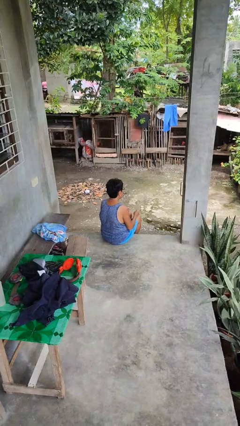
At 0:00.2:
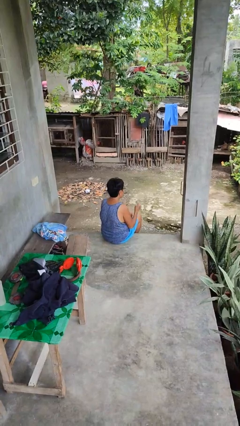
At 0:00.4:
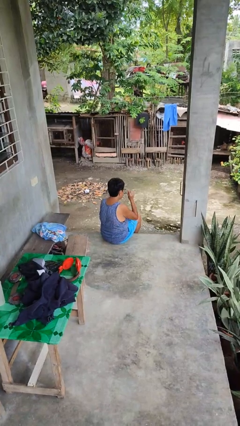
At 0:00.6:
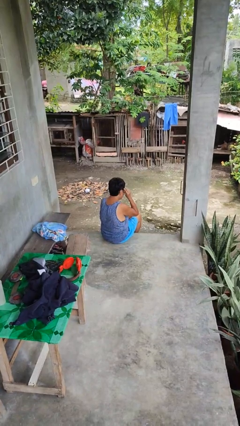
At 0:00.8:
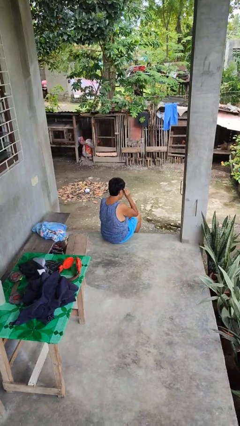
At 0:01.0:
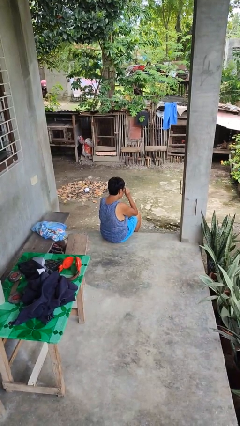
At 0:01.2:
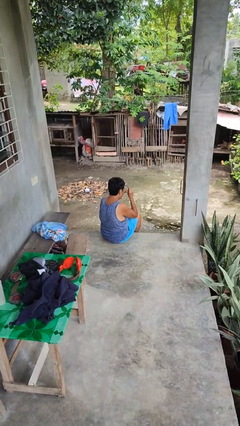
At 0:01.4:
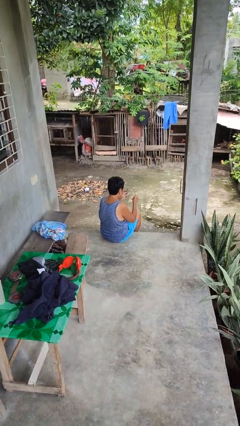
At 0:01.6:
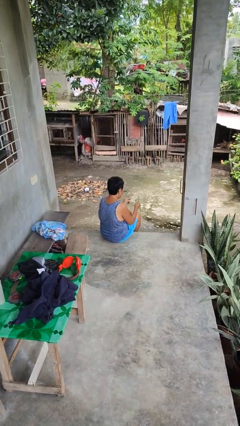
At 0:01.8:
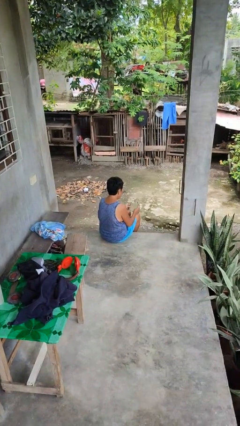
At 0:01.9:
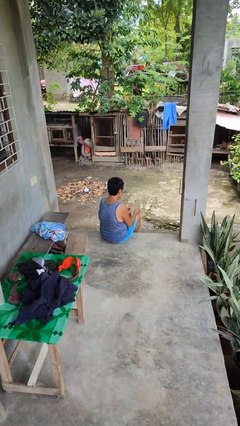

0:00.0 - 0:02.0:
person takes off glasses

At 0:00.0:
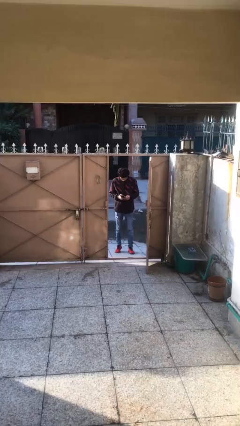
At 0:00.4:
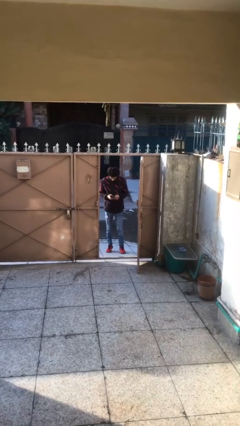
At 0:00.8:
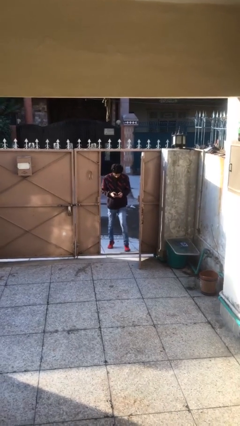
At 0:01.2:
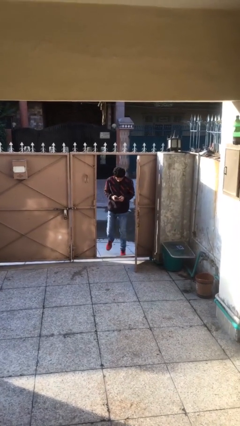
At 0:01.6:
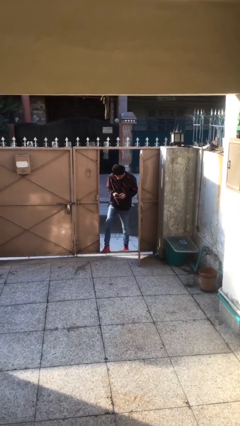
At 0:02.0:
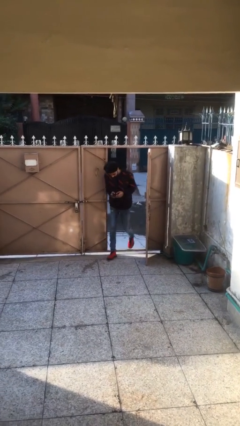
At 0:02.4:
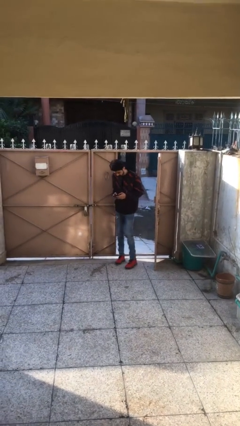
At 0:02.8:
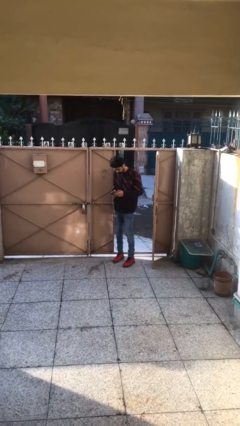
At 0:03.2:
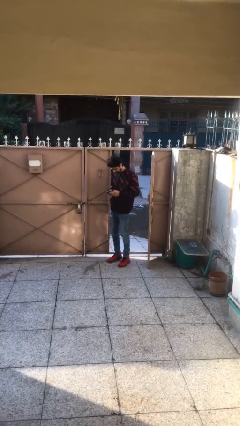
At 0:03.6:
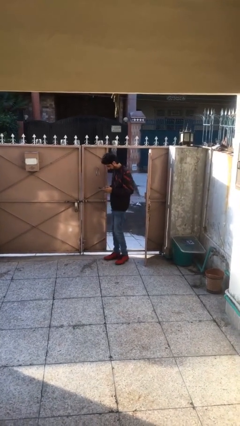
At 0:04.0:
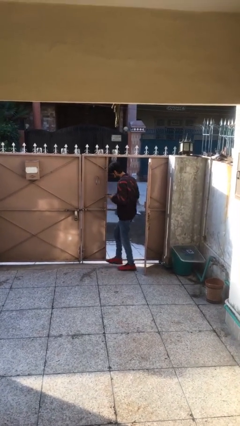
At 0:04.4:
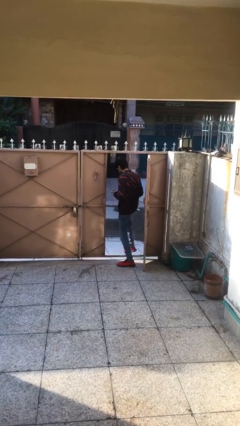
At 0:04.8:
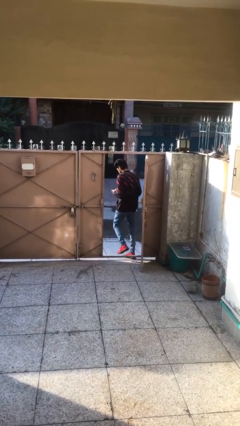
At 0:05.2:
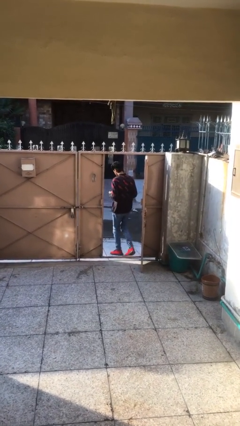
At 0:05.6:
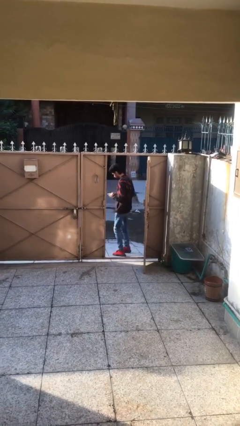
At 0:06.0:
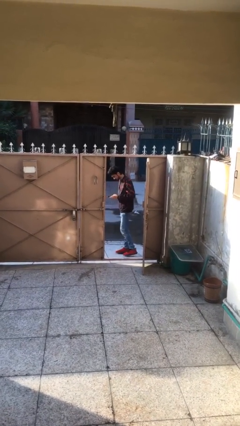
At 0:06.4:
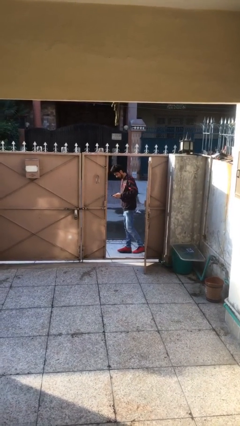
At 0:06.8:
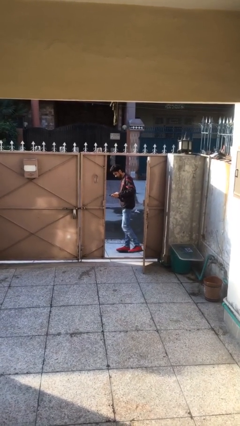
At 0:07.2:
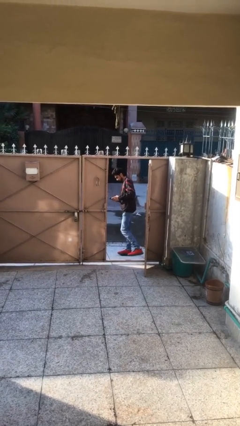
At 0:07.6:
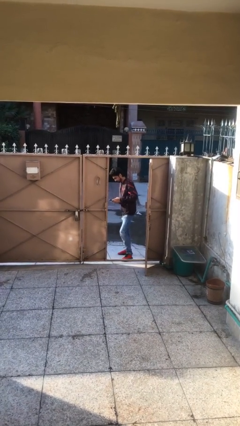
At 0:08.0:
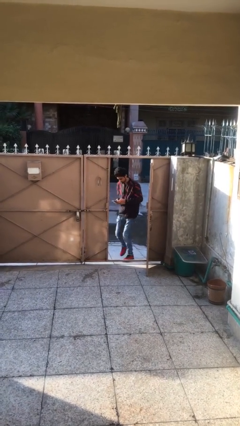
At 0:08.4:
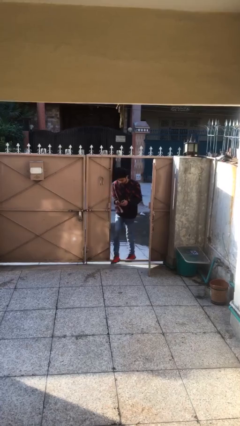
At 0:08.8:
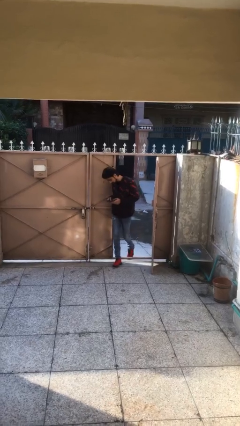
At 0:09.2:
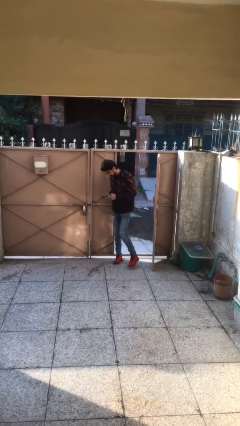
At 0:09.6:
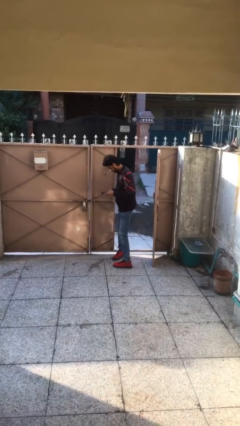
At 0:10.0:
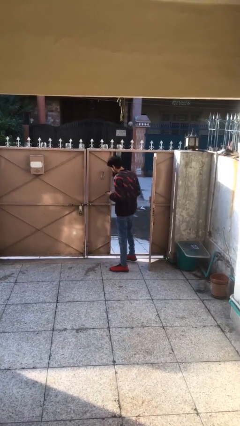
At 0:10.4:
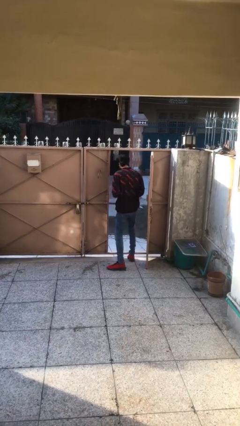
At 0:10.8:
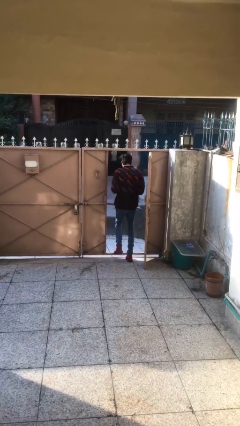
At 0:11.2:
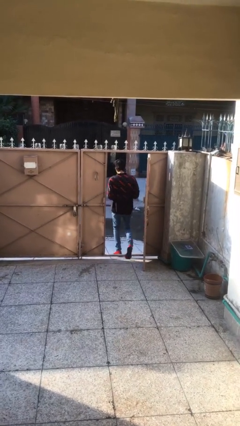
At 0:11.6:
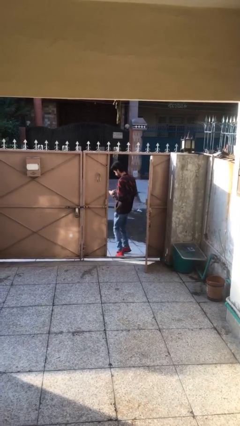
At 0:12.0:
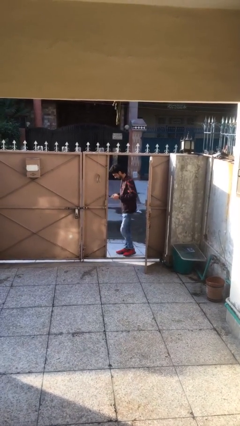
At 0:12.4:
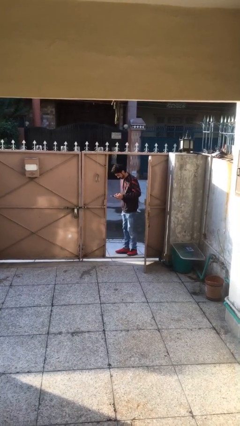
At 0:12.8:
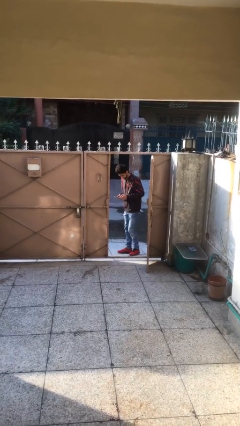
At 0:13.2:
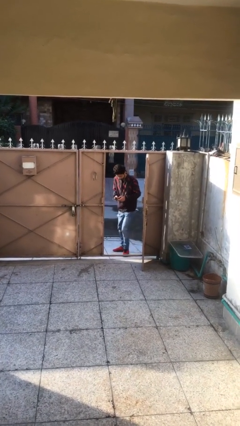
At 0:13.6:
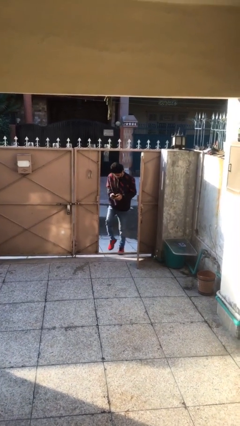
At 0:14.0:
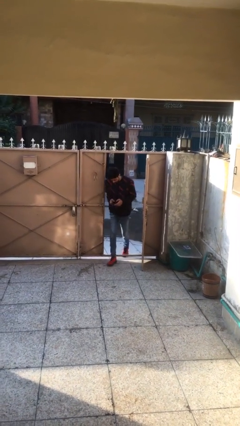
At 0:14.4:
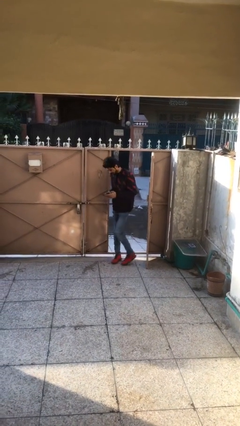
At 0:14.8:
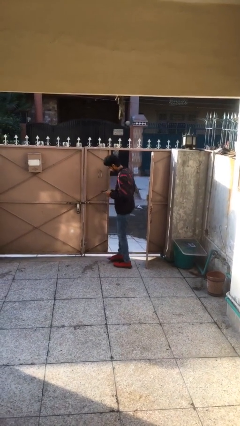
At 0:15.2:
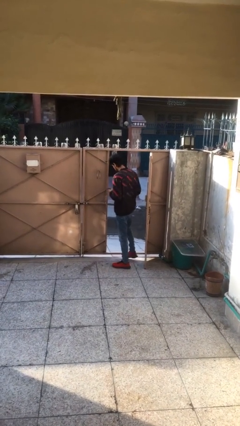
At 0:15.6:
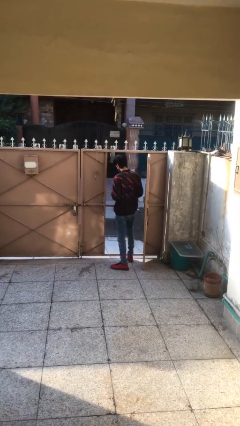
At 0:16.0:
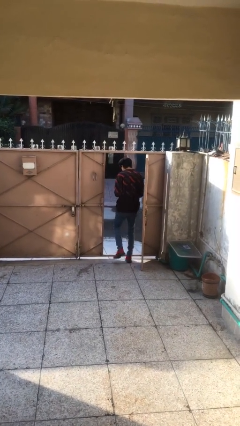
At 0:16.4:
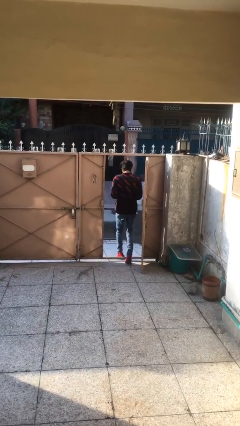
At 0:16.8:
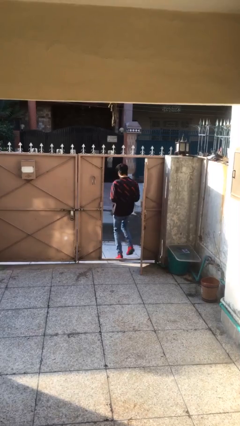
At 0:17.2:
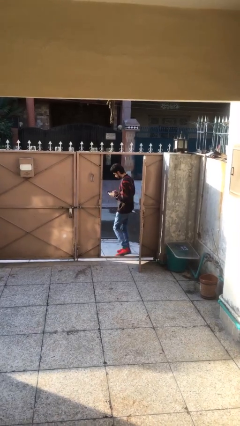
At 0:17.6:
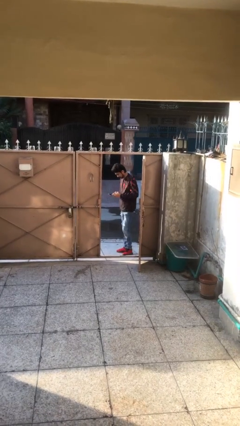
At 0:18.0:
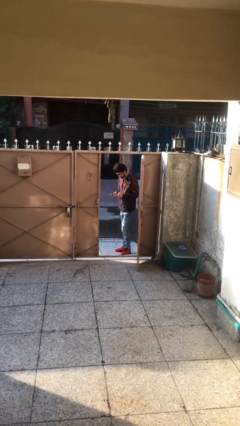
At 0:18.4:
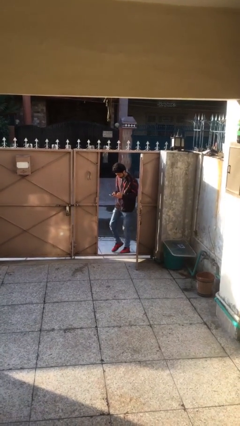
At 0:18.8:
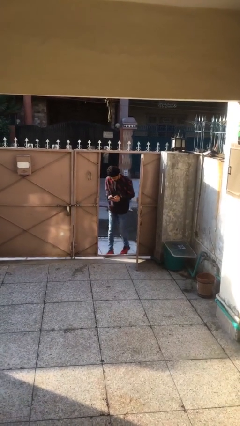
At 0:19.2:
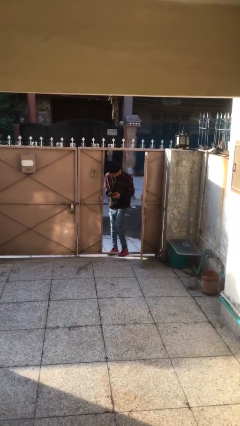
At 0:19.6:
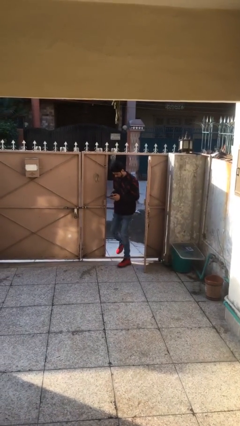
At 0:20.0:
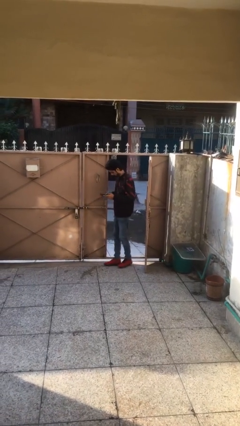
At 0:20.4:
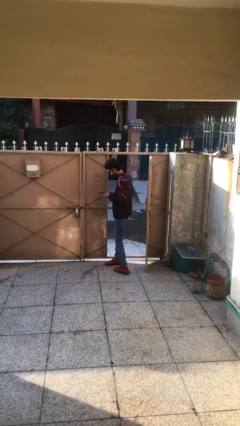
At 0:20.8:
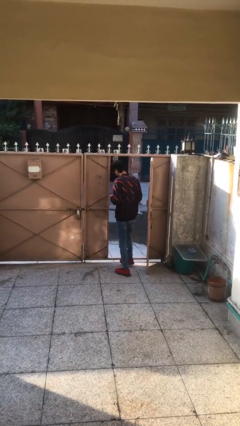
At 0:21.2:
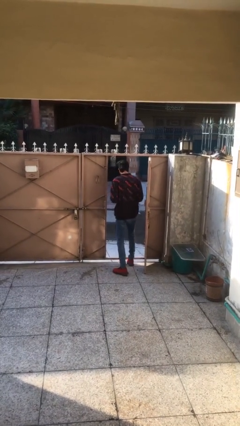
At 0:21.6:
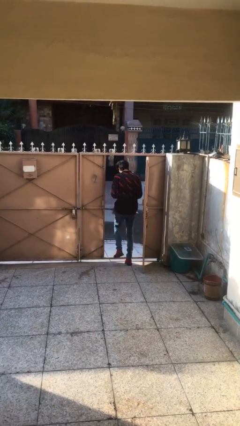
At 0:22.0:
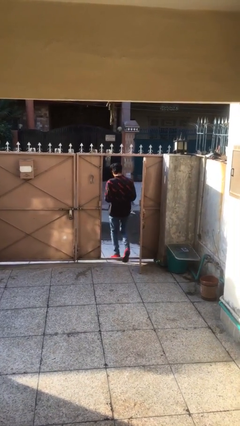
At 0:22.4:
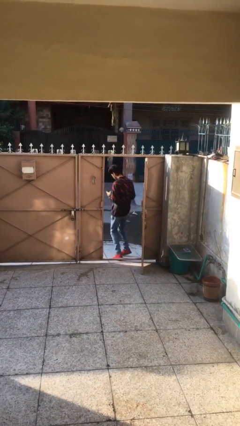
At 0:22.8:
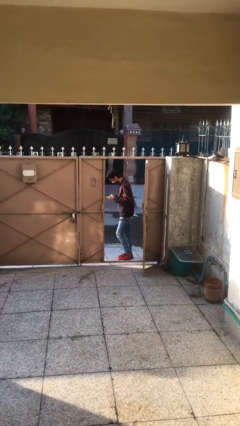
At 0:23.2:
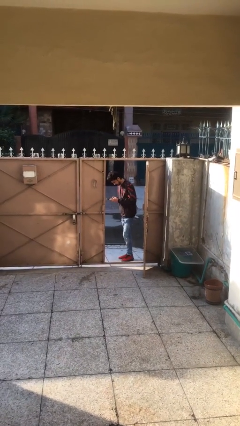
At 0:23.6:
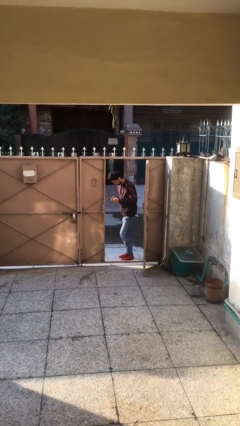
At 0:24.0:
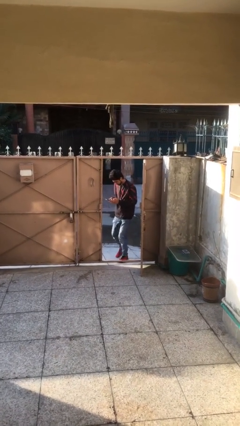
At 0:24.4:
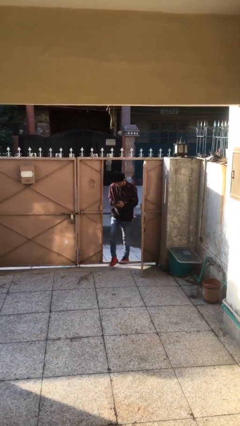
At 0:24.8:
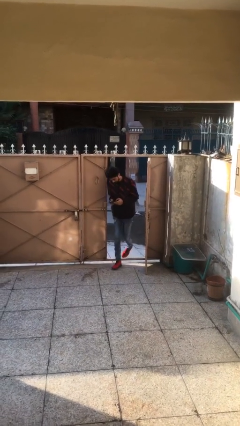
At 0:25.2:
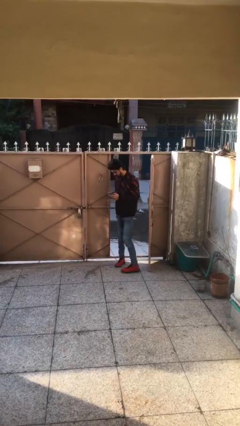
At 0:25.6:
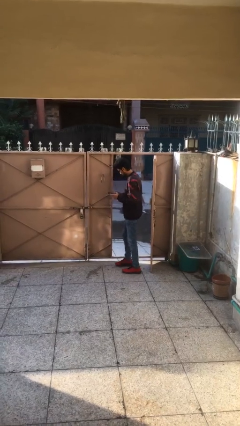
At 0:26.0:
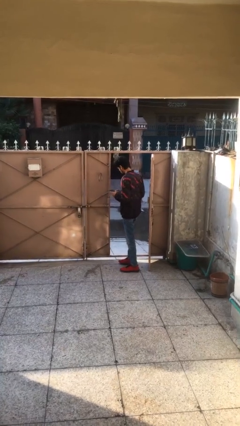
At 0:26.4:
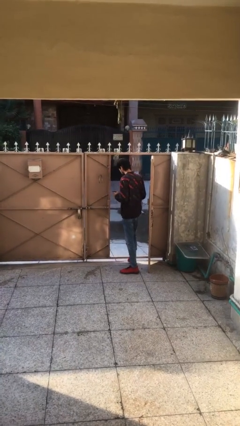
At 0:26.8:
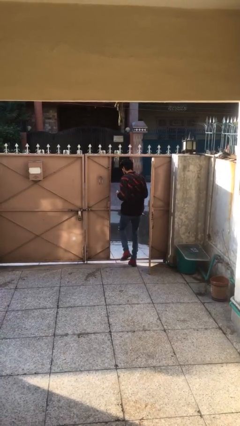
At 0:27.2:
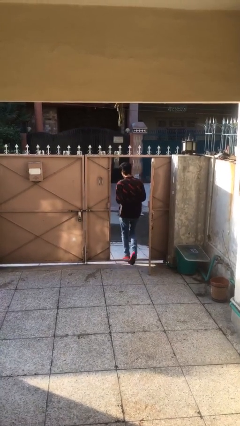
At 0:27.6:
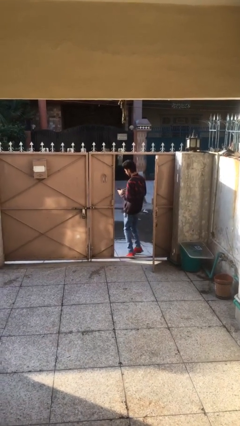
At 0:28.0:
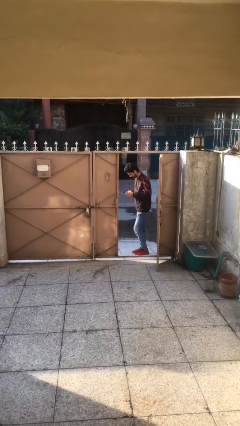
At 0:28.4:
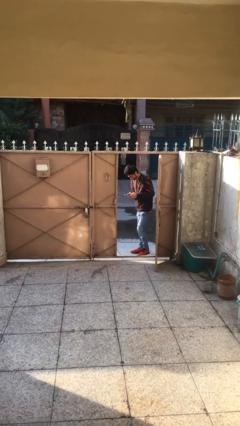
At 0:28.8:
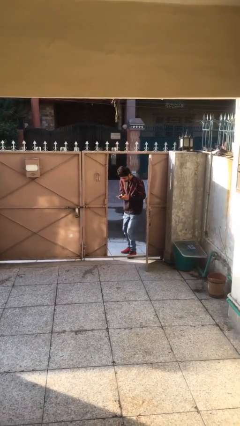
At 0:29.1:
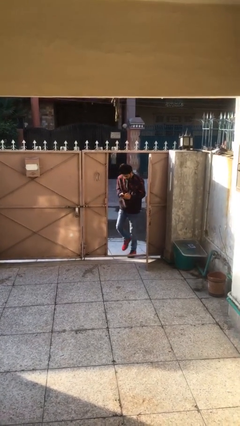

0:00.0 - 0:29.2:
person texts on phone

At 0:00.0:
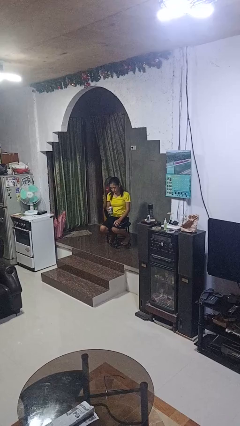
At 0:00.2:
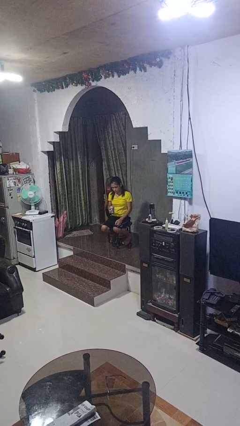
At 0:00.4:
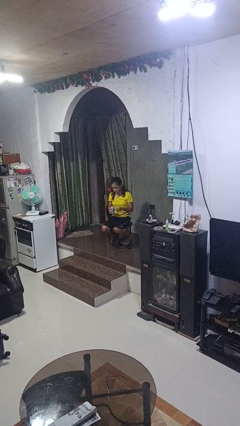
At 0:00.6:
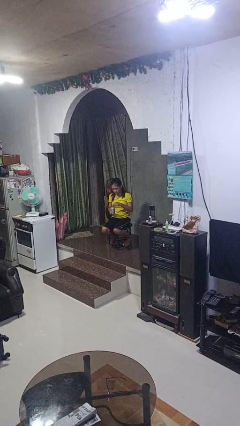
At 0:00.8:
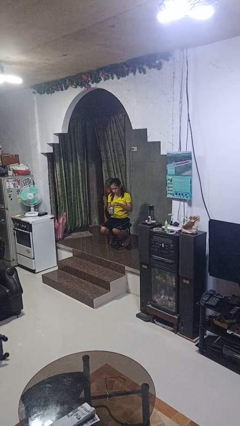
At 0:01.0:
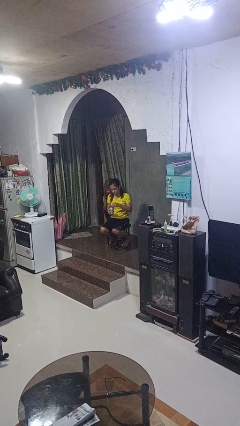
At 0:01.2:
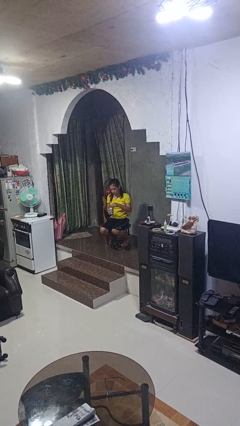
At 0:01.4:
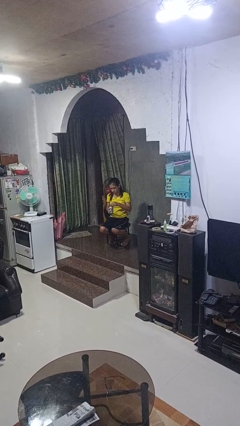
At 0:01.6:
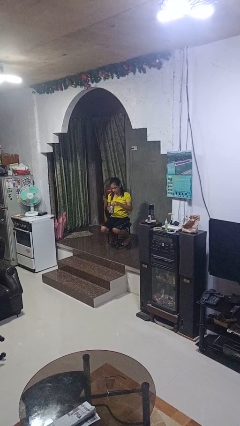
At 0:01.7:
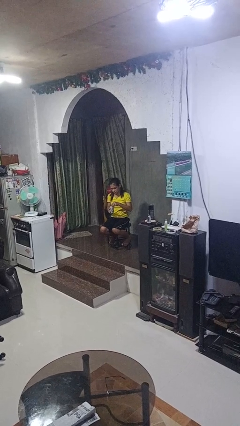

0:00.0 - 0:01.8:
person opens beverage can
